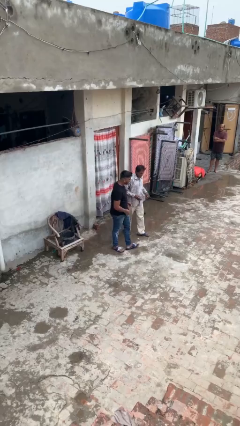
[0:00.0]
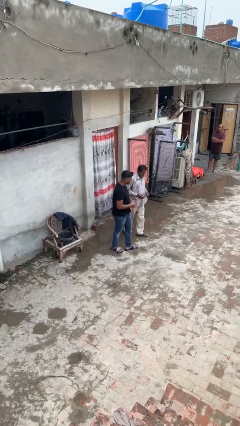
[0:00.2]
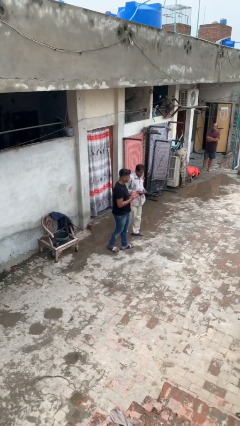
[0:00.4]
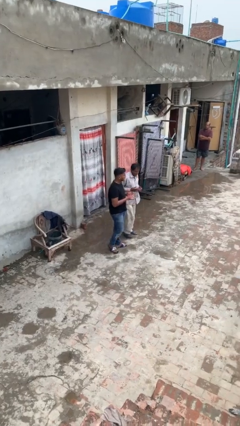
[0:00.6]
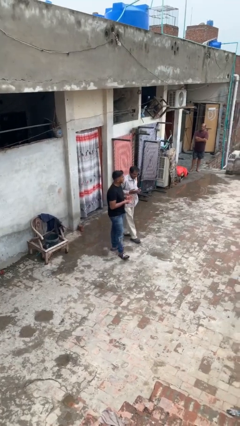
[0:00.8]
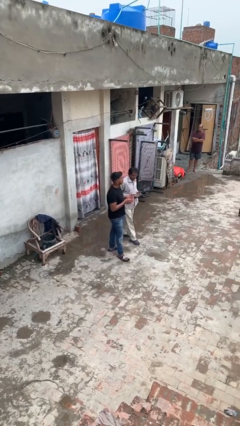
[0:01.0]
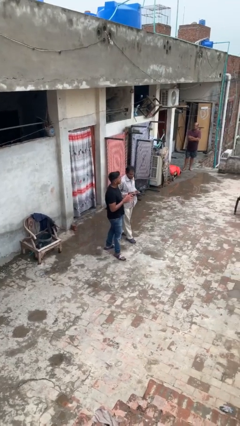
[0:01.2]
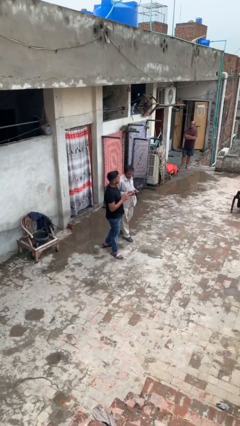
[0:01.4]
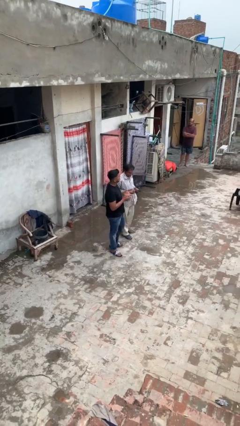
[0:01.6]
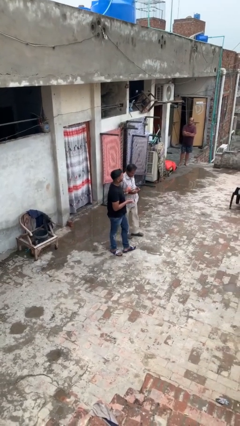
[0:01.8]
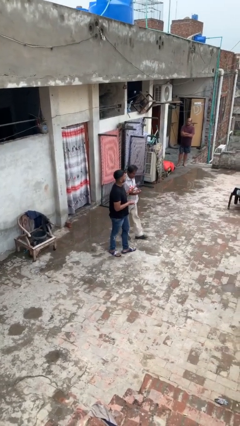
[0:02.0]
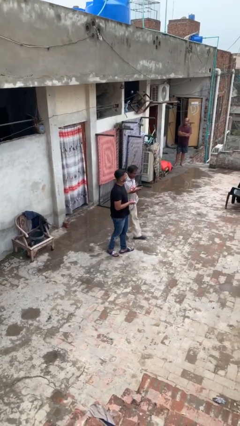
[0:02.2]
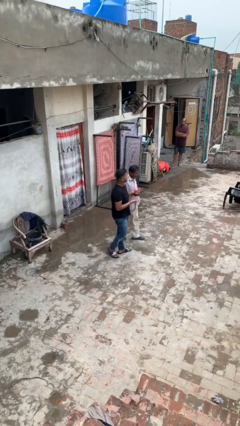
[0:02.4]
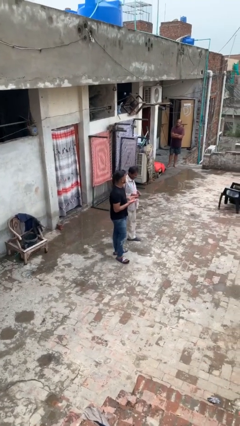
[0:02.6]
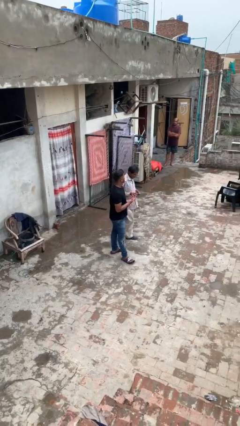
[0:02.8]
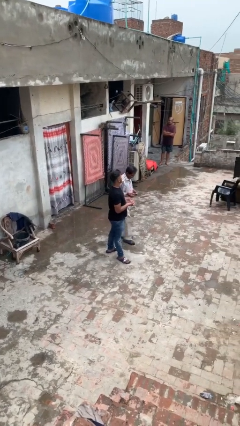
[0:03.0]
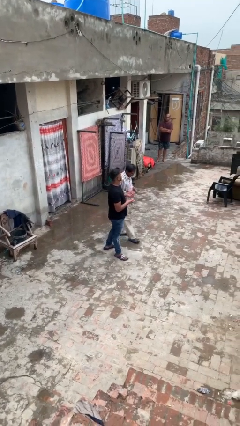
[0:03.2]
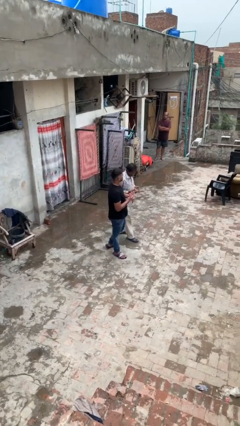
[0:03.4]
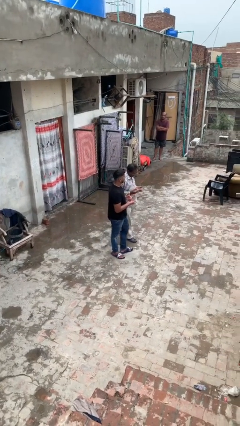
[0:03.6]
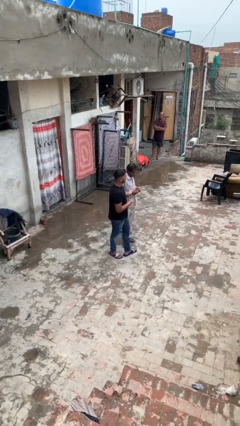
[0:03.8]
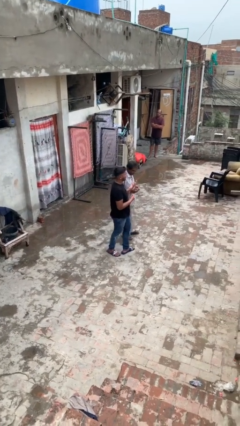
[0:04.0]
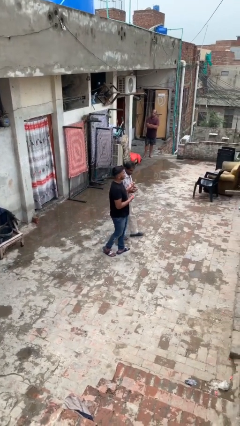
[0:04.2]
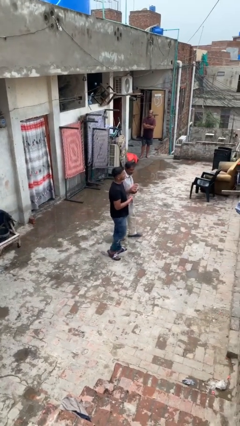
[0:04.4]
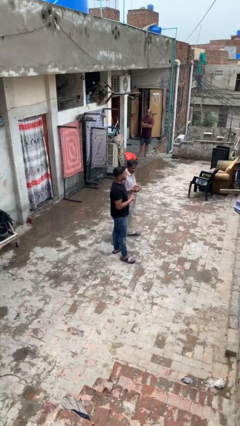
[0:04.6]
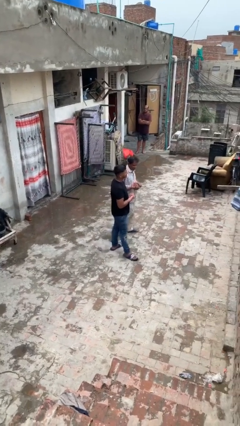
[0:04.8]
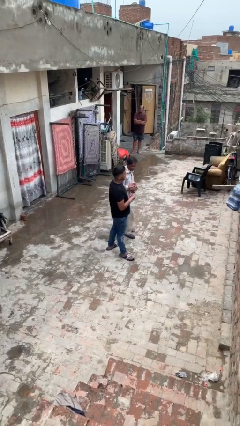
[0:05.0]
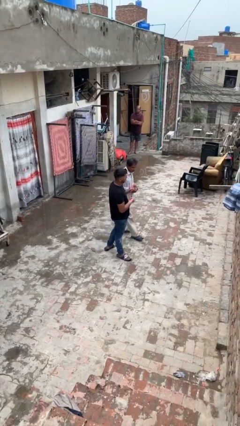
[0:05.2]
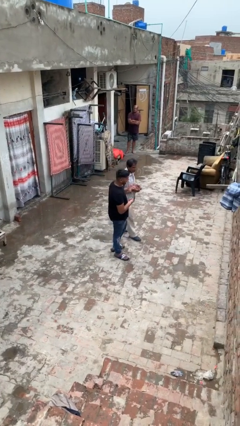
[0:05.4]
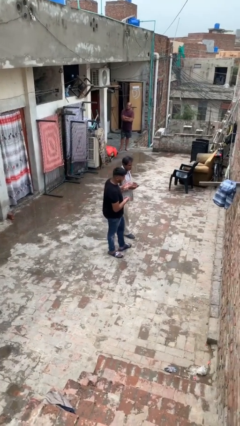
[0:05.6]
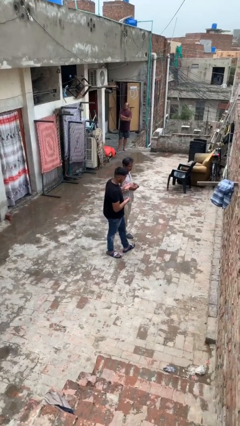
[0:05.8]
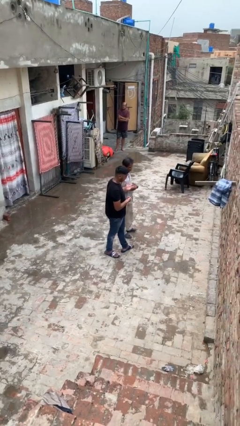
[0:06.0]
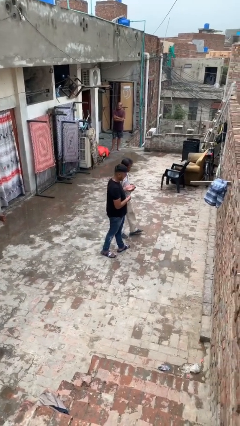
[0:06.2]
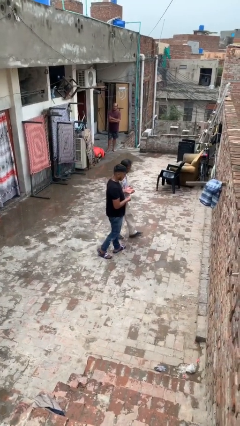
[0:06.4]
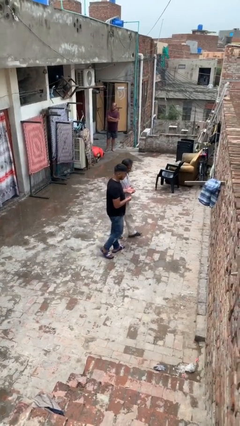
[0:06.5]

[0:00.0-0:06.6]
person talks to person

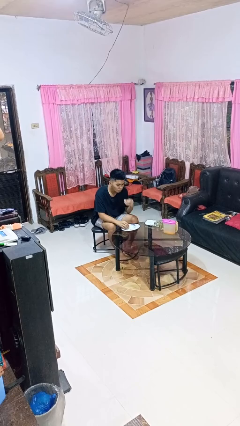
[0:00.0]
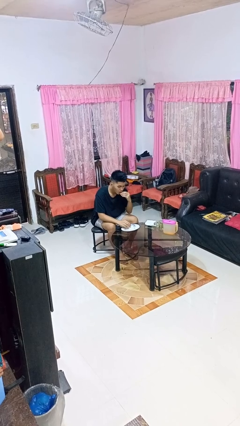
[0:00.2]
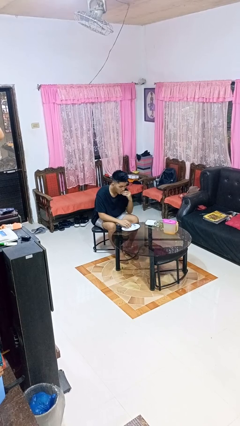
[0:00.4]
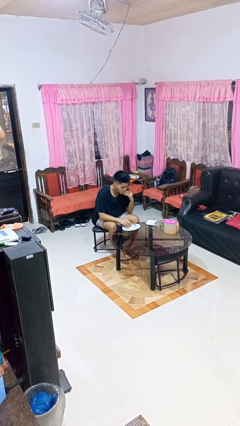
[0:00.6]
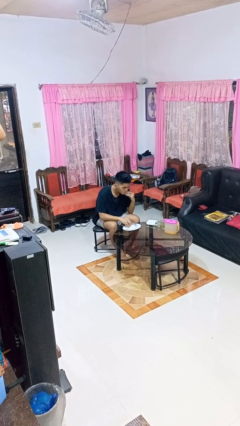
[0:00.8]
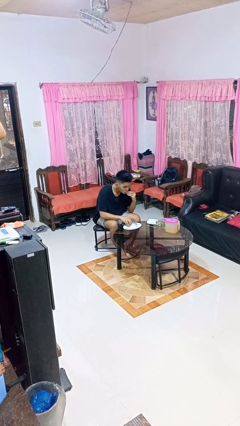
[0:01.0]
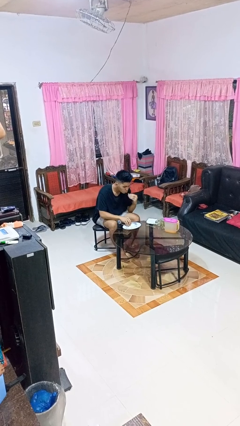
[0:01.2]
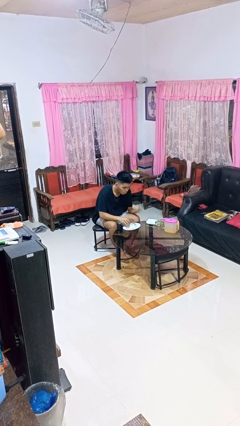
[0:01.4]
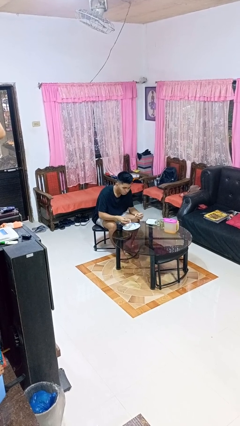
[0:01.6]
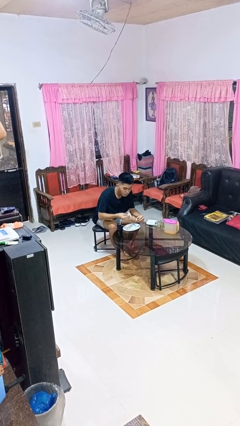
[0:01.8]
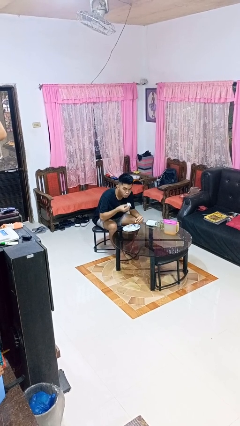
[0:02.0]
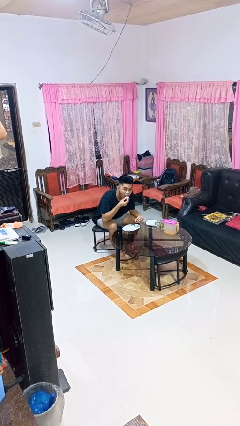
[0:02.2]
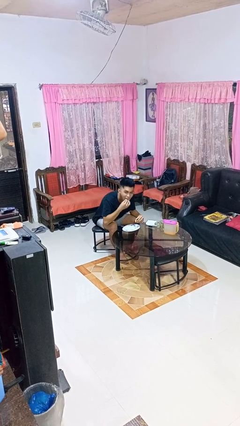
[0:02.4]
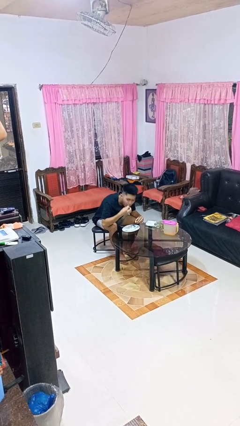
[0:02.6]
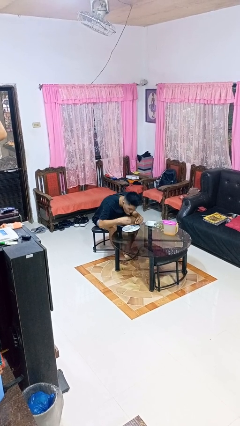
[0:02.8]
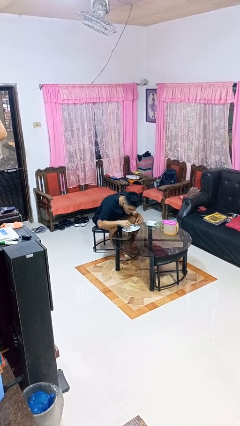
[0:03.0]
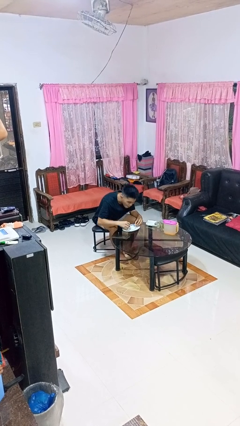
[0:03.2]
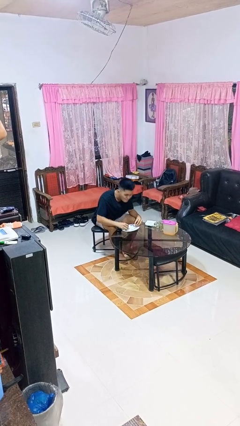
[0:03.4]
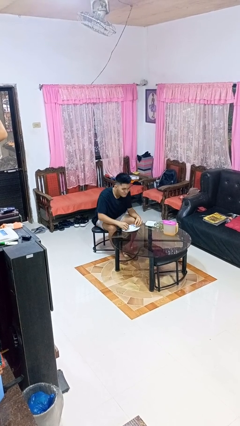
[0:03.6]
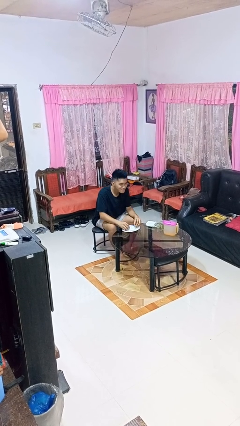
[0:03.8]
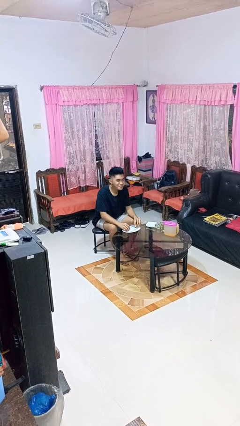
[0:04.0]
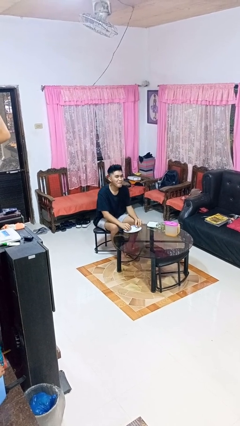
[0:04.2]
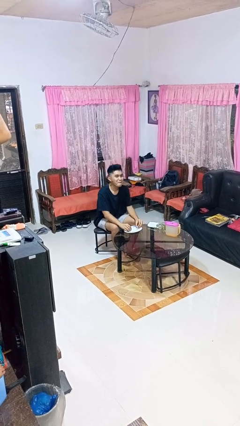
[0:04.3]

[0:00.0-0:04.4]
person eats with hands

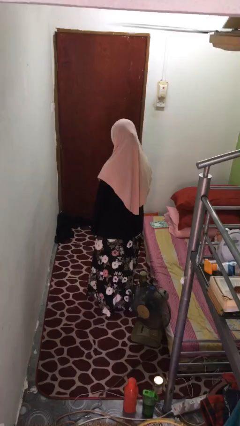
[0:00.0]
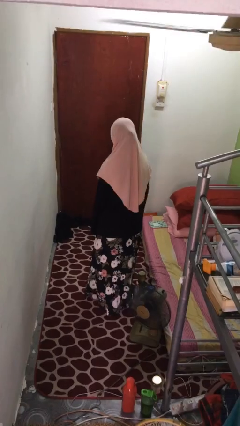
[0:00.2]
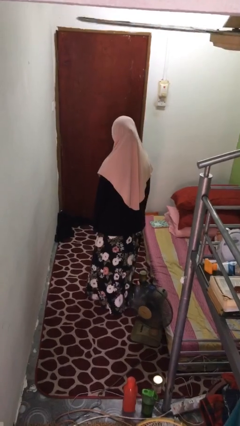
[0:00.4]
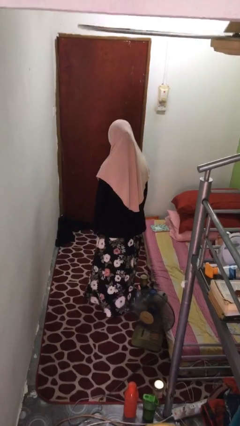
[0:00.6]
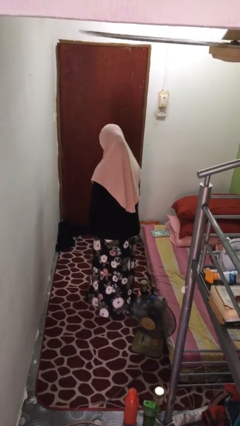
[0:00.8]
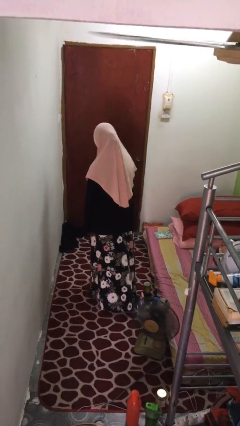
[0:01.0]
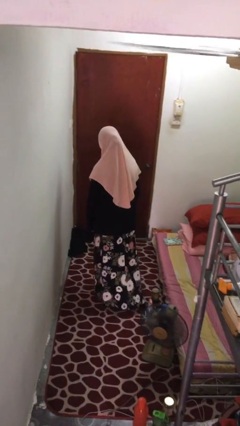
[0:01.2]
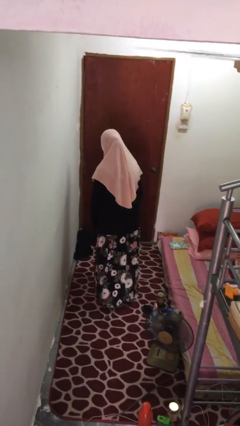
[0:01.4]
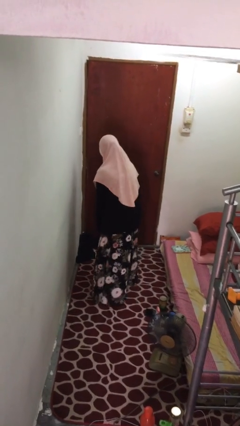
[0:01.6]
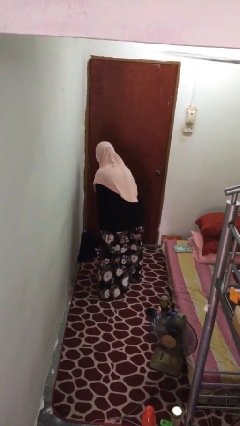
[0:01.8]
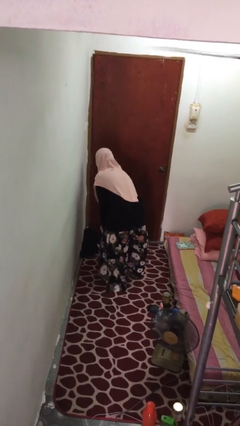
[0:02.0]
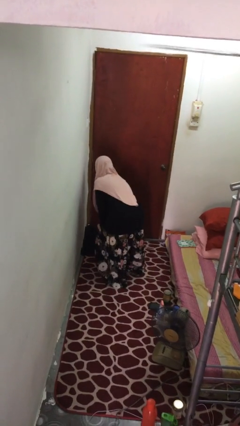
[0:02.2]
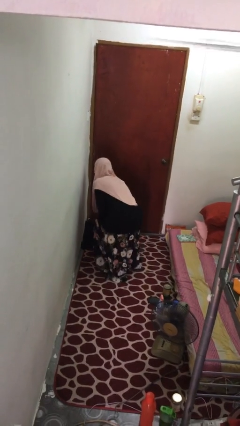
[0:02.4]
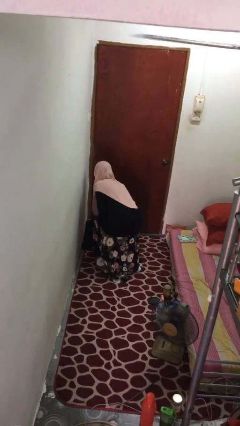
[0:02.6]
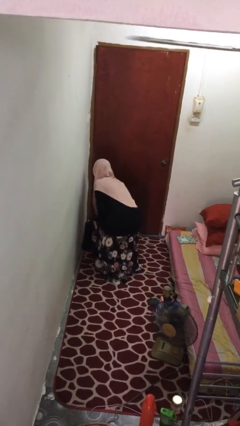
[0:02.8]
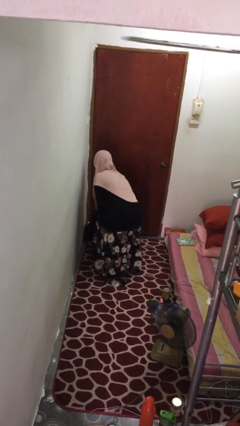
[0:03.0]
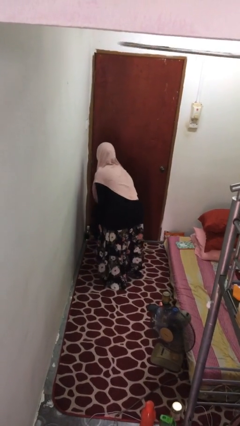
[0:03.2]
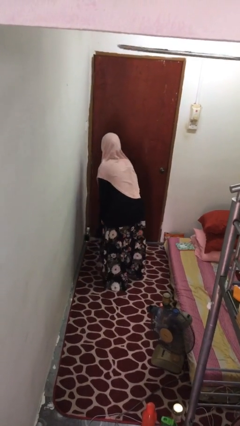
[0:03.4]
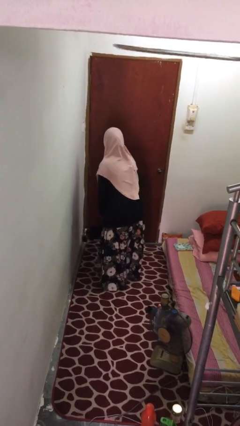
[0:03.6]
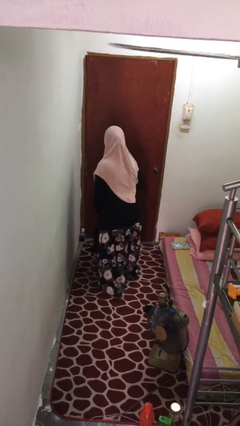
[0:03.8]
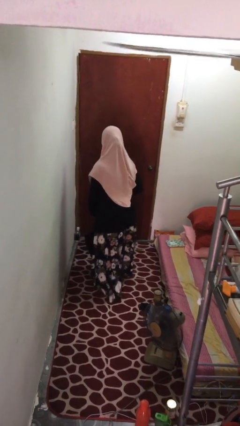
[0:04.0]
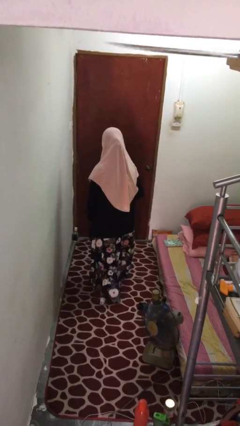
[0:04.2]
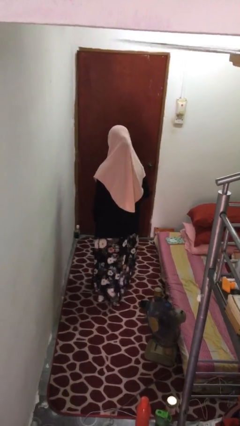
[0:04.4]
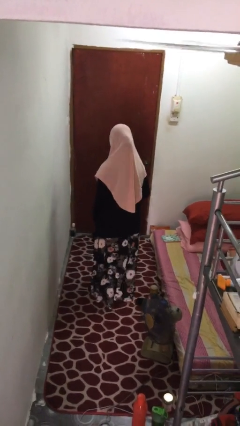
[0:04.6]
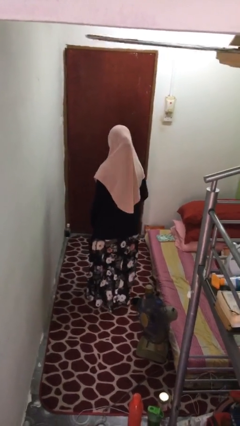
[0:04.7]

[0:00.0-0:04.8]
person picks up object from floor

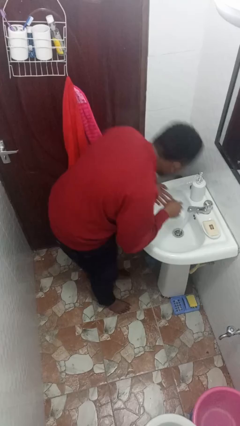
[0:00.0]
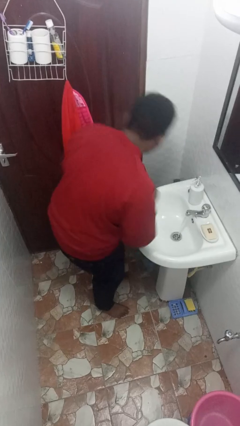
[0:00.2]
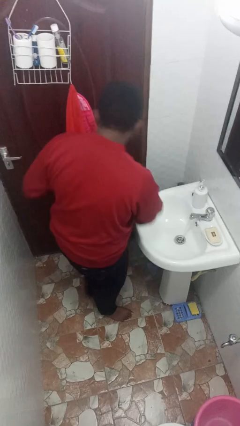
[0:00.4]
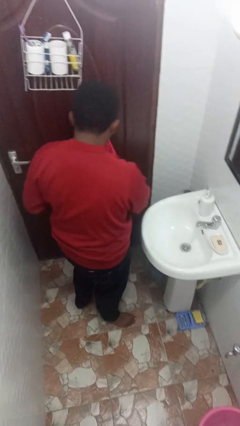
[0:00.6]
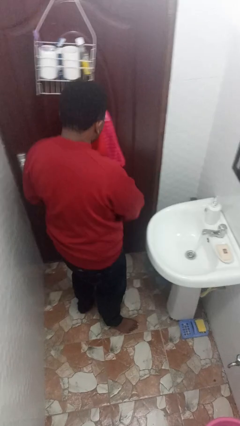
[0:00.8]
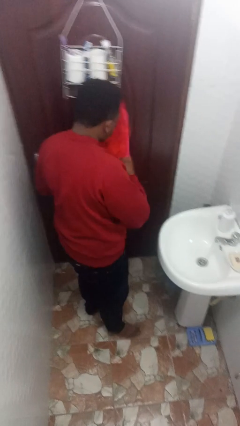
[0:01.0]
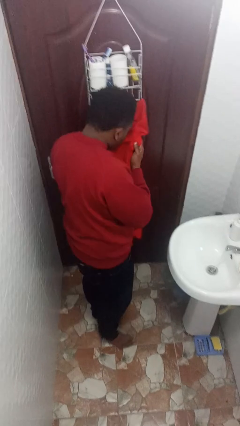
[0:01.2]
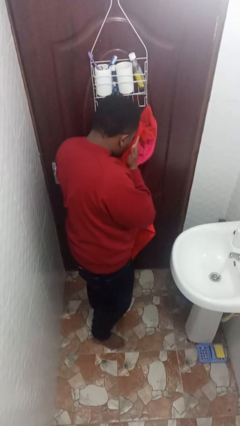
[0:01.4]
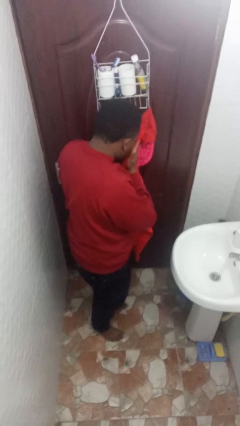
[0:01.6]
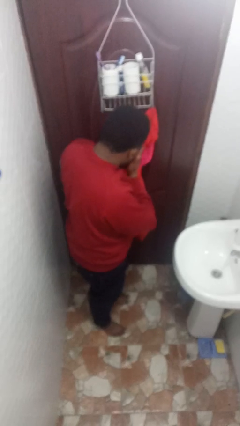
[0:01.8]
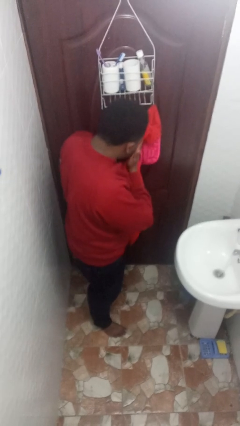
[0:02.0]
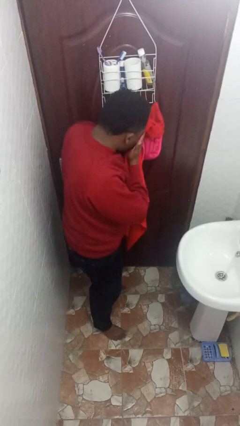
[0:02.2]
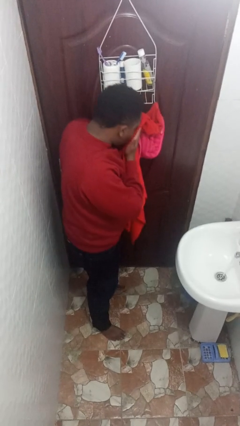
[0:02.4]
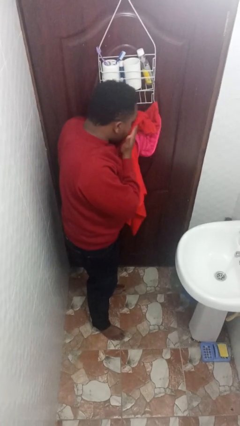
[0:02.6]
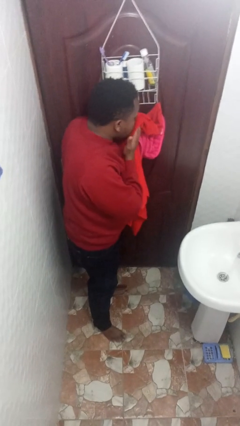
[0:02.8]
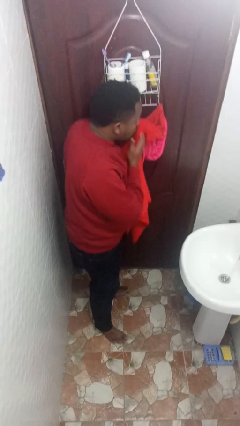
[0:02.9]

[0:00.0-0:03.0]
person dries face with towel
